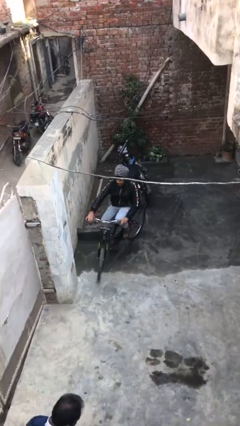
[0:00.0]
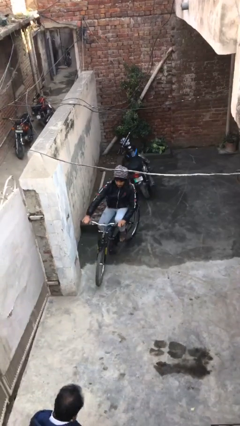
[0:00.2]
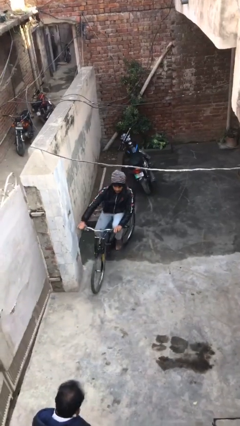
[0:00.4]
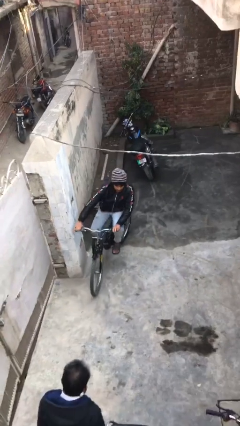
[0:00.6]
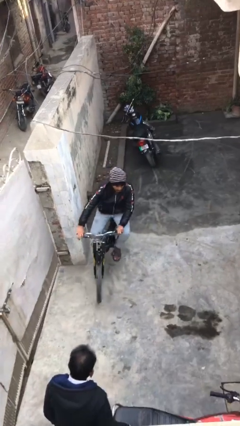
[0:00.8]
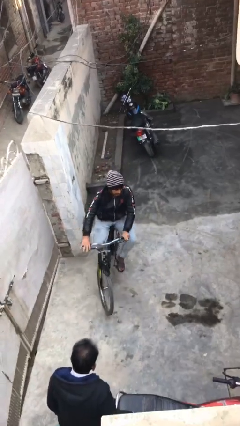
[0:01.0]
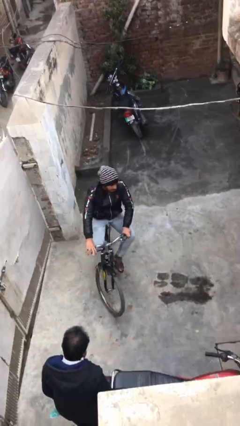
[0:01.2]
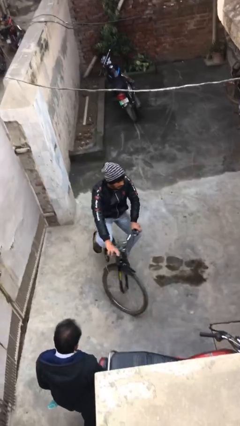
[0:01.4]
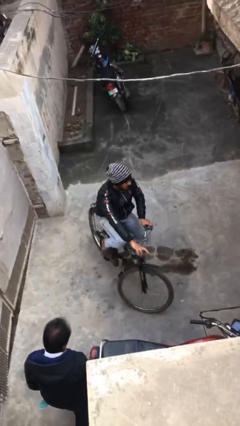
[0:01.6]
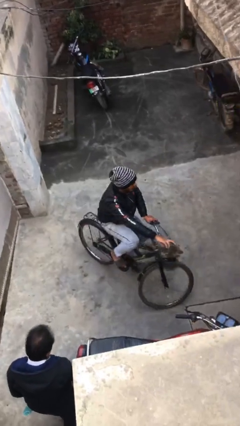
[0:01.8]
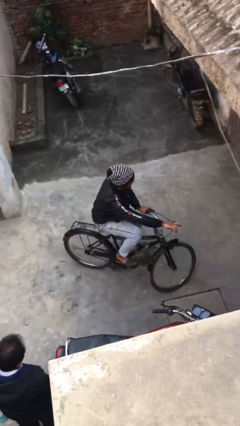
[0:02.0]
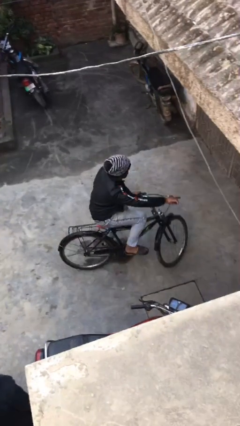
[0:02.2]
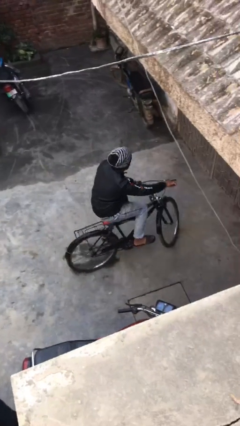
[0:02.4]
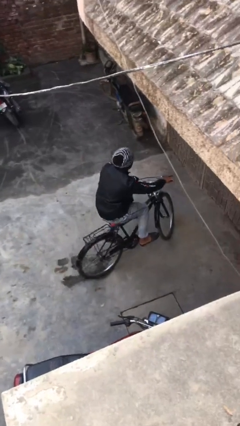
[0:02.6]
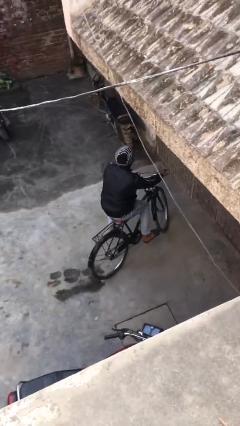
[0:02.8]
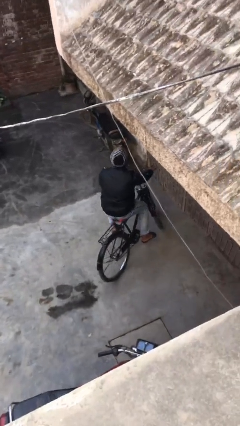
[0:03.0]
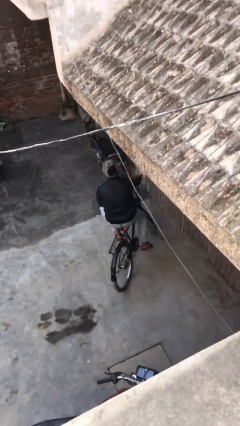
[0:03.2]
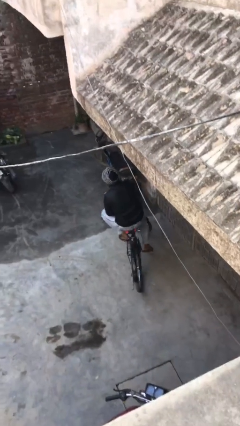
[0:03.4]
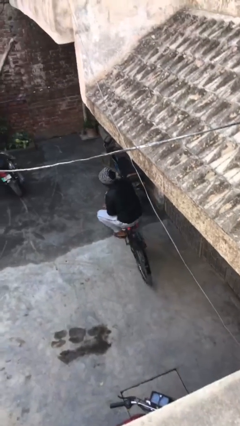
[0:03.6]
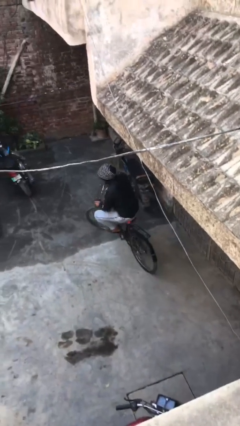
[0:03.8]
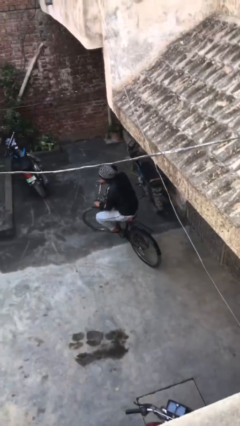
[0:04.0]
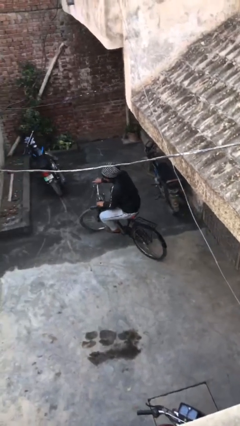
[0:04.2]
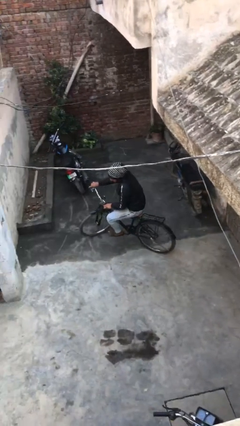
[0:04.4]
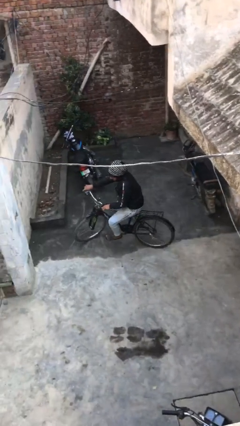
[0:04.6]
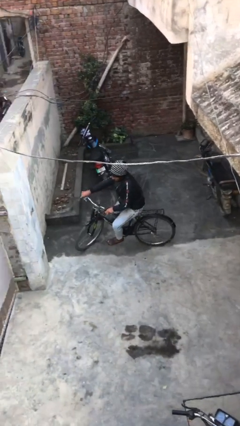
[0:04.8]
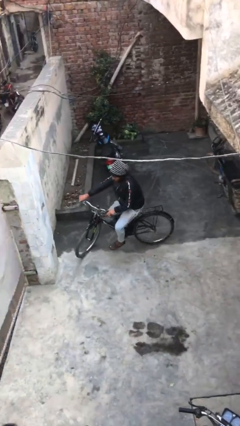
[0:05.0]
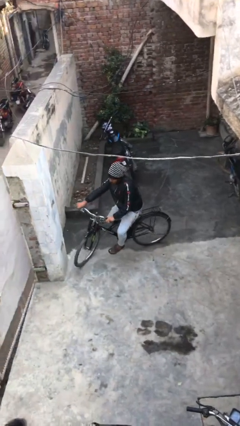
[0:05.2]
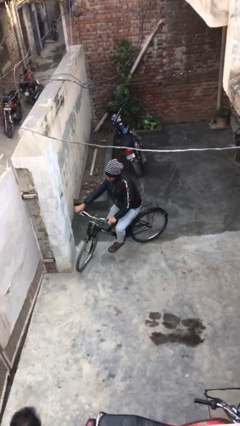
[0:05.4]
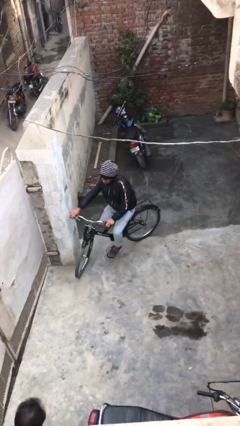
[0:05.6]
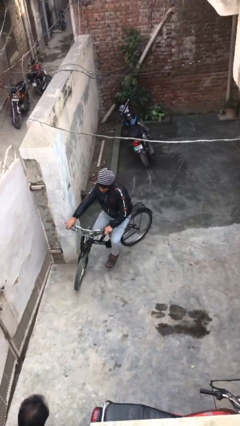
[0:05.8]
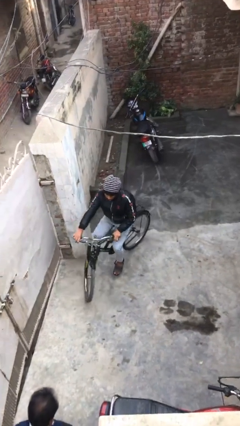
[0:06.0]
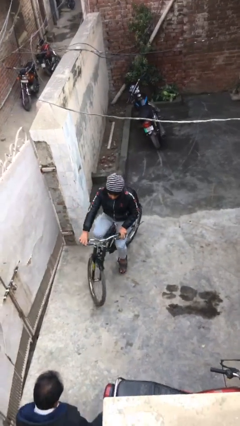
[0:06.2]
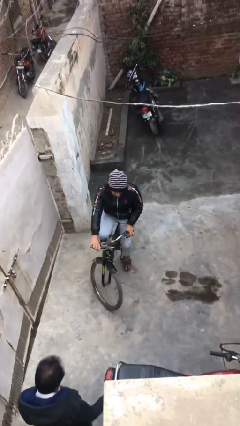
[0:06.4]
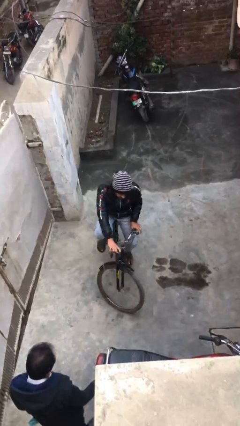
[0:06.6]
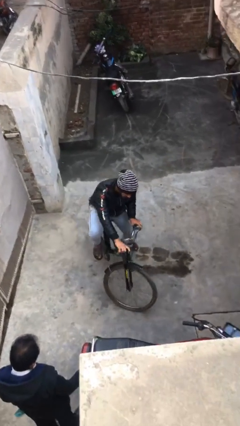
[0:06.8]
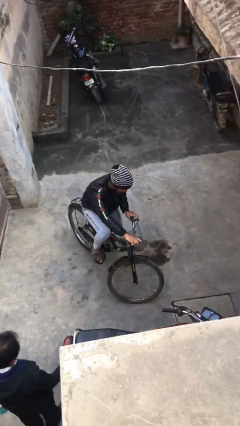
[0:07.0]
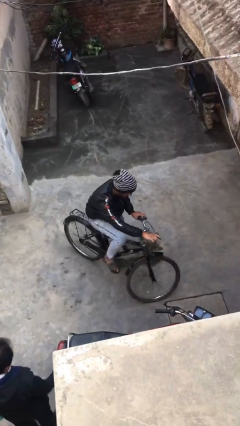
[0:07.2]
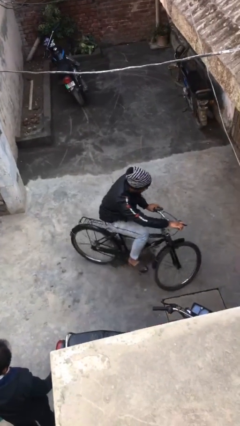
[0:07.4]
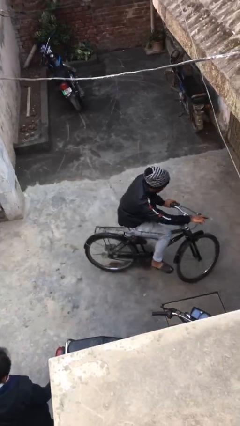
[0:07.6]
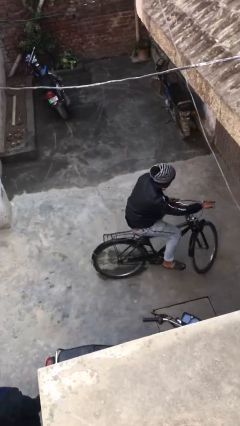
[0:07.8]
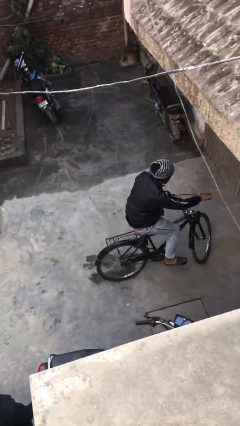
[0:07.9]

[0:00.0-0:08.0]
person rides bicycle

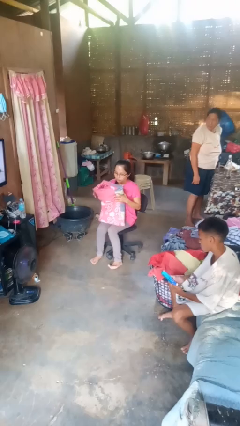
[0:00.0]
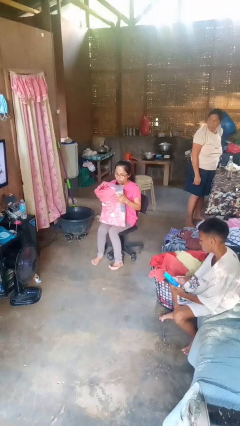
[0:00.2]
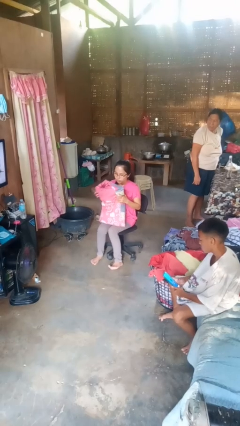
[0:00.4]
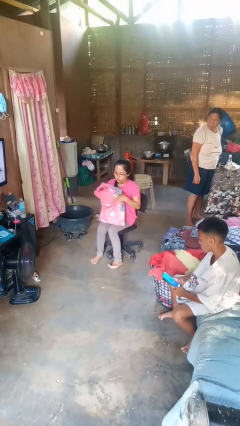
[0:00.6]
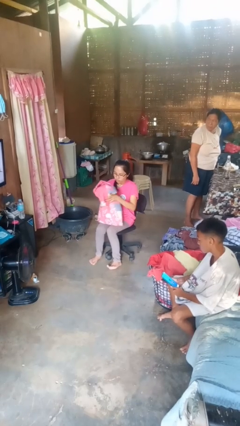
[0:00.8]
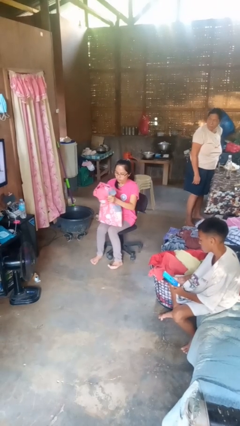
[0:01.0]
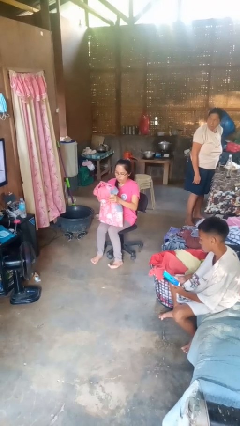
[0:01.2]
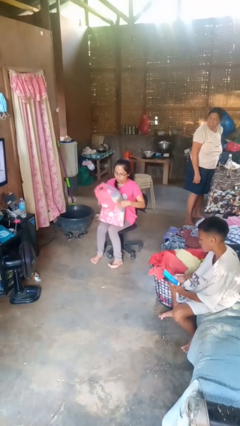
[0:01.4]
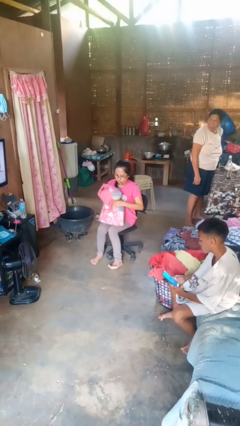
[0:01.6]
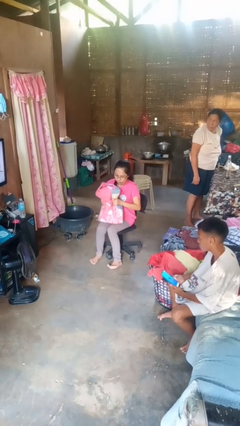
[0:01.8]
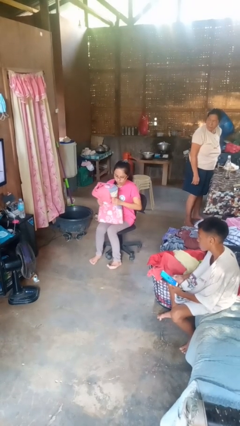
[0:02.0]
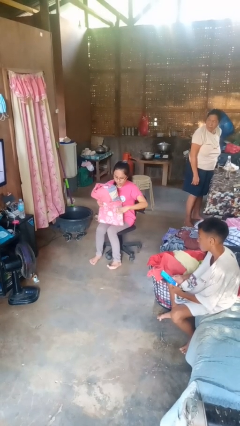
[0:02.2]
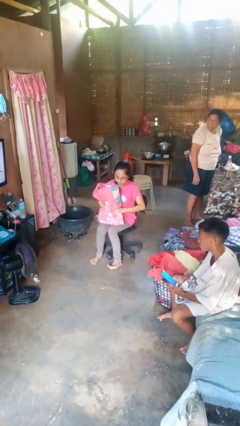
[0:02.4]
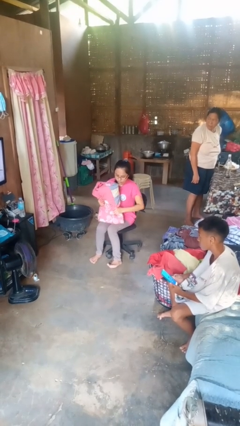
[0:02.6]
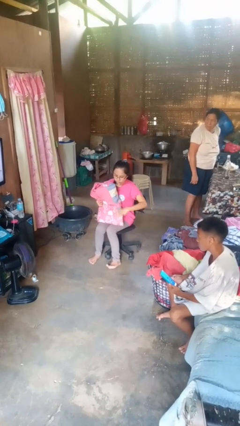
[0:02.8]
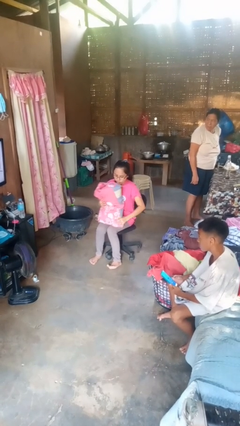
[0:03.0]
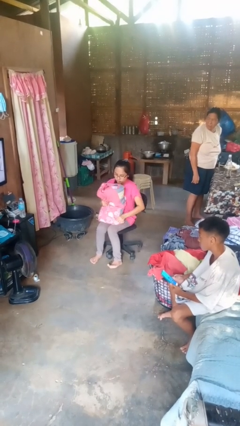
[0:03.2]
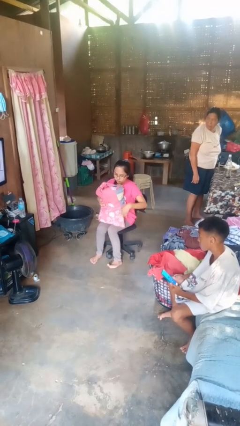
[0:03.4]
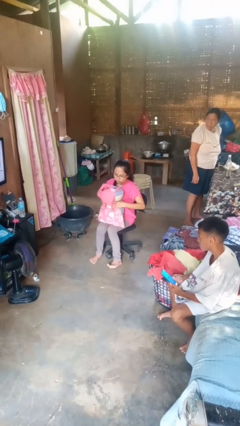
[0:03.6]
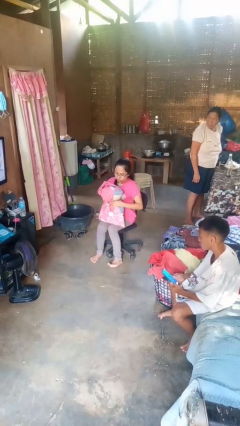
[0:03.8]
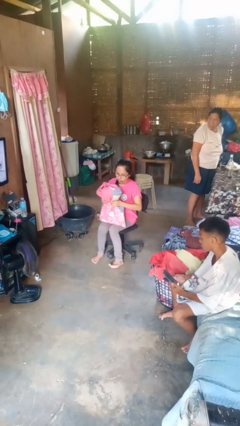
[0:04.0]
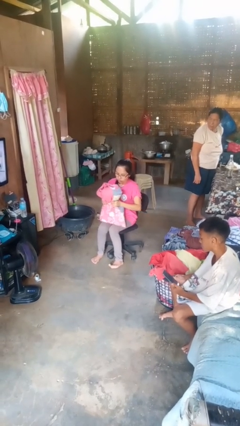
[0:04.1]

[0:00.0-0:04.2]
person squeezes object

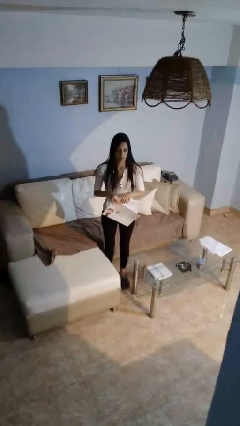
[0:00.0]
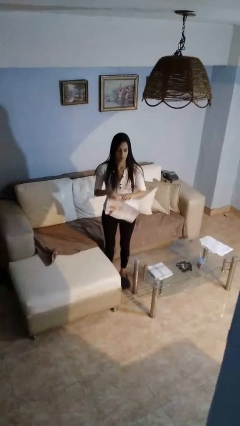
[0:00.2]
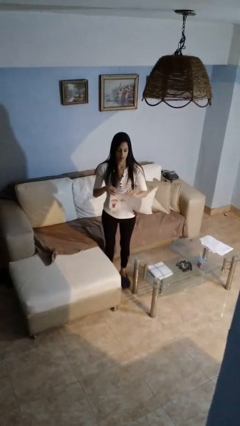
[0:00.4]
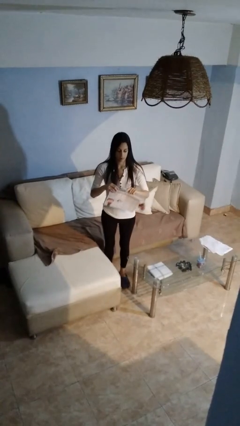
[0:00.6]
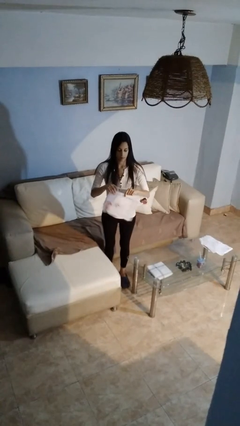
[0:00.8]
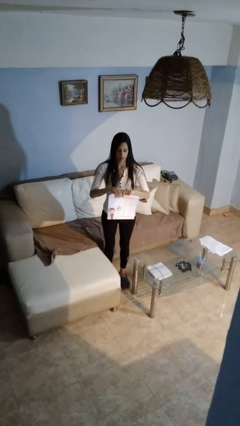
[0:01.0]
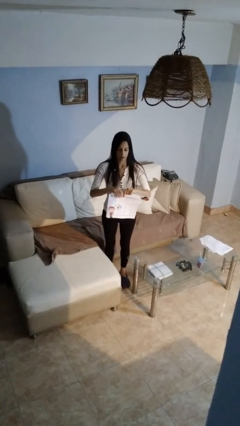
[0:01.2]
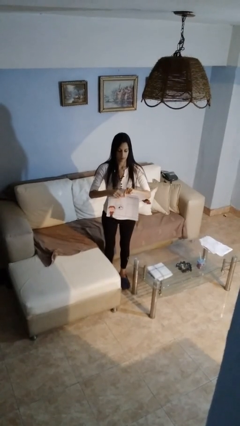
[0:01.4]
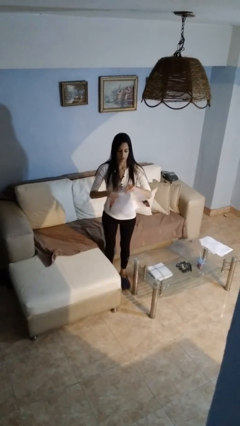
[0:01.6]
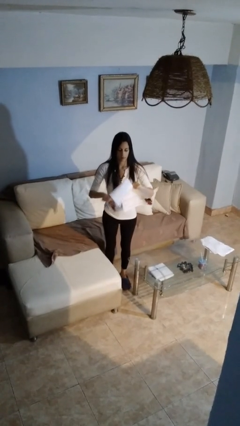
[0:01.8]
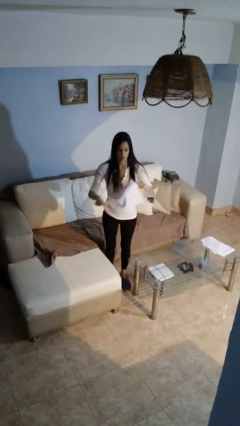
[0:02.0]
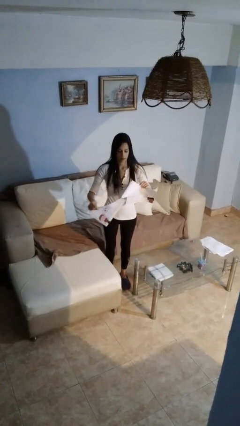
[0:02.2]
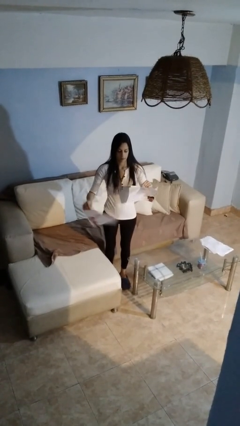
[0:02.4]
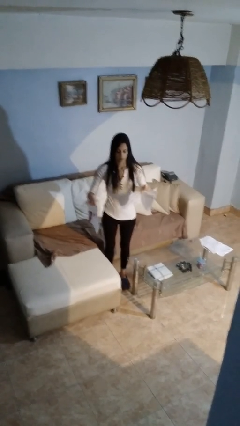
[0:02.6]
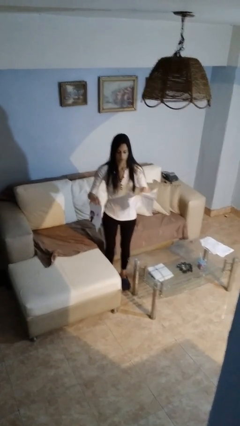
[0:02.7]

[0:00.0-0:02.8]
person tears paper

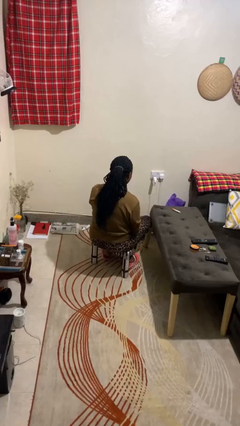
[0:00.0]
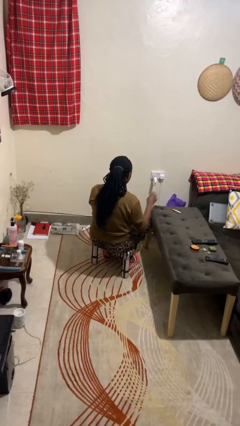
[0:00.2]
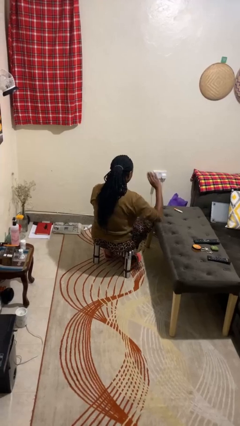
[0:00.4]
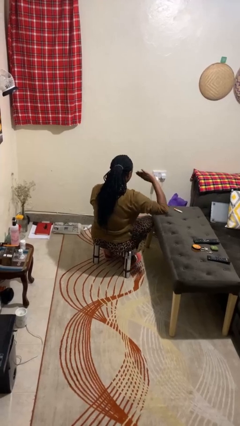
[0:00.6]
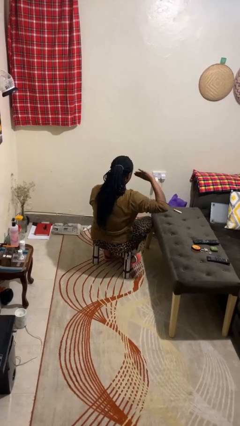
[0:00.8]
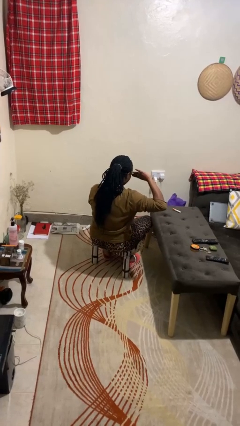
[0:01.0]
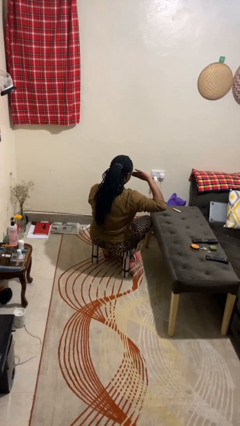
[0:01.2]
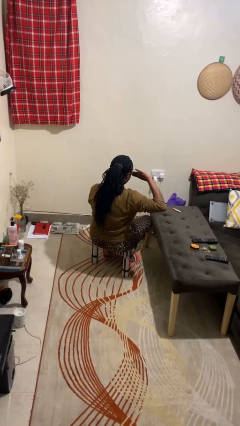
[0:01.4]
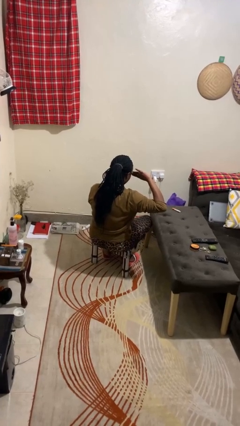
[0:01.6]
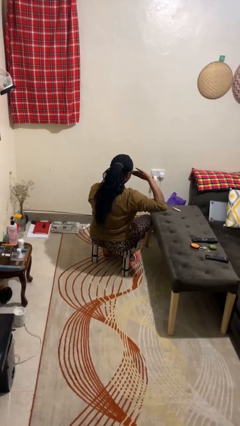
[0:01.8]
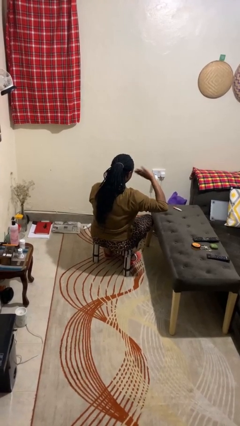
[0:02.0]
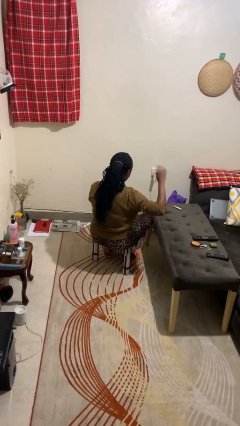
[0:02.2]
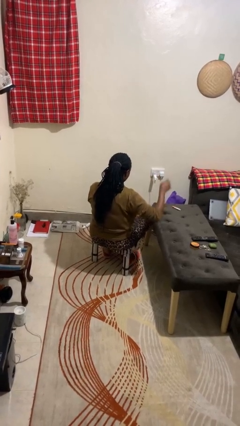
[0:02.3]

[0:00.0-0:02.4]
person salutes

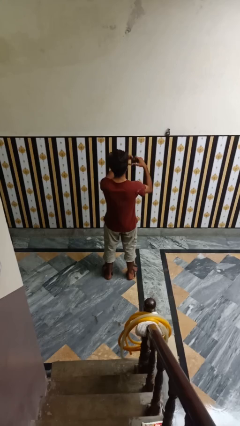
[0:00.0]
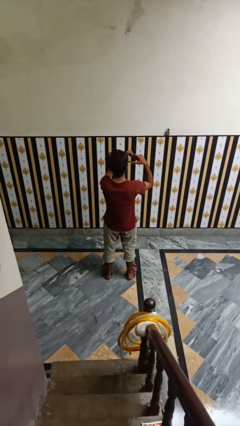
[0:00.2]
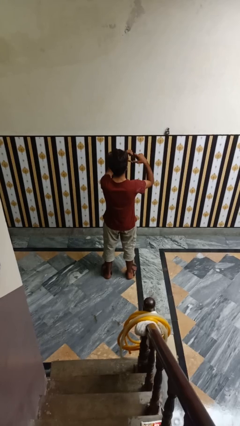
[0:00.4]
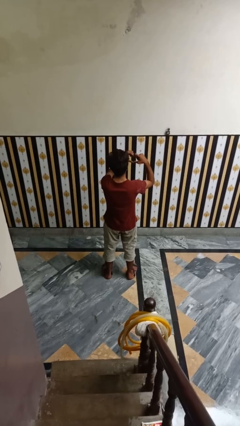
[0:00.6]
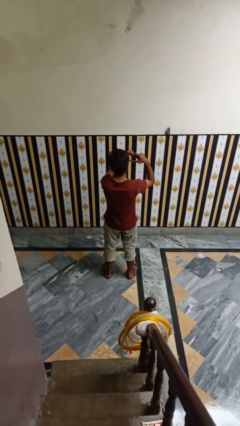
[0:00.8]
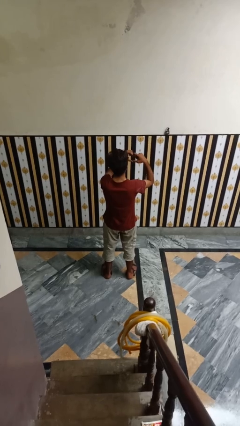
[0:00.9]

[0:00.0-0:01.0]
person gestures heart
